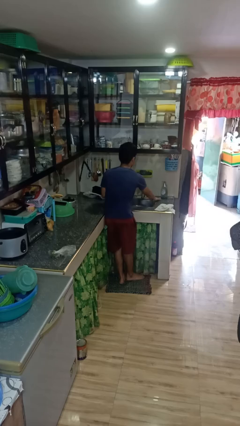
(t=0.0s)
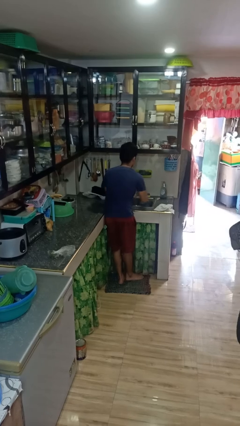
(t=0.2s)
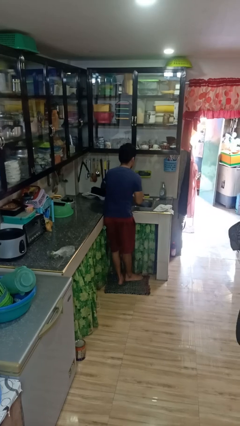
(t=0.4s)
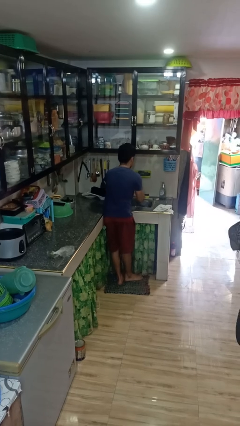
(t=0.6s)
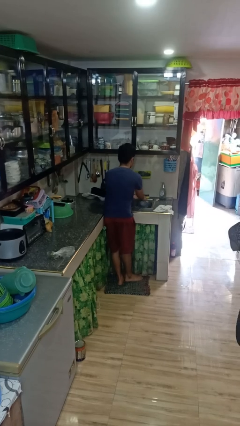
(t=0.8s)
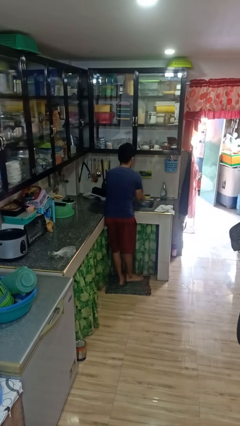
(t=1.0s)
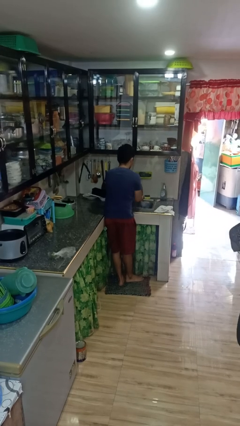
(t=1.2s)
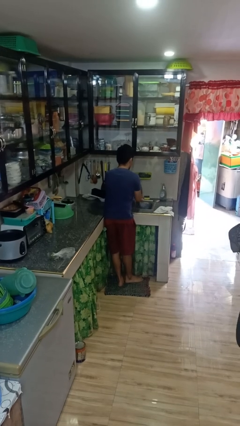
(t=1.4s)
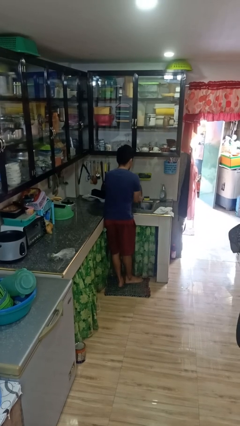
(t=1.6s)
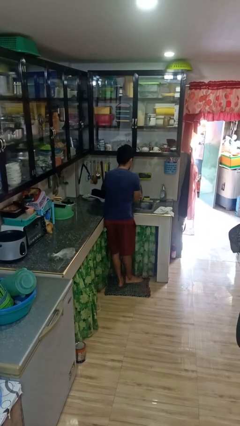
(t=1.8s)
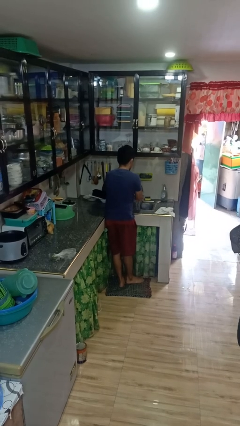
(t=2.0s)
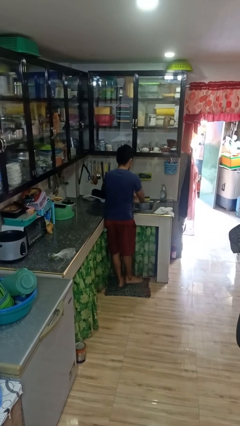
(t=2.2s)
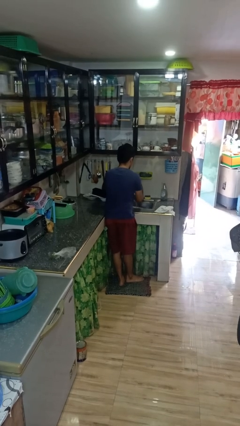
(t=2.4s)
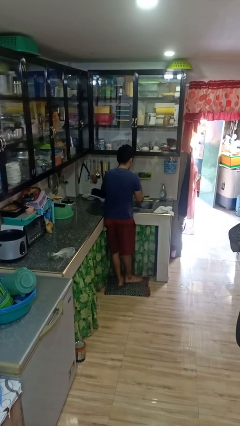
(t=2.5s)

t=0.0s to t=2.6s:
person washes hands

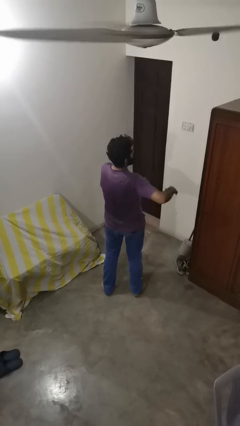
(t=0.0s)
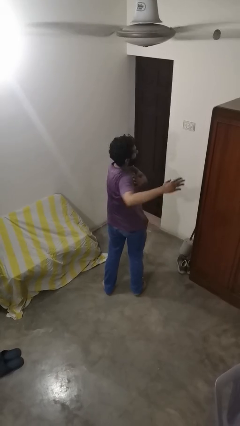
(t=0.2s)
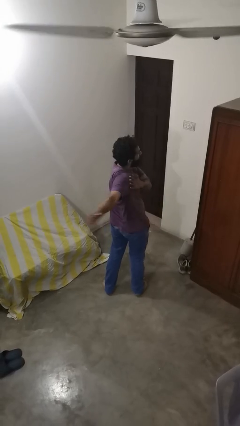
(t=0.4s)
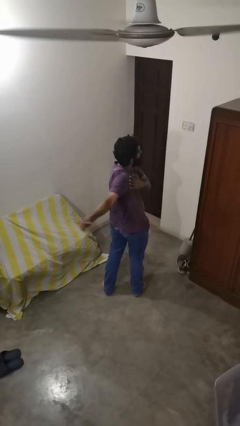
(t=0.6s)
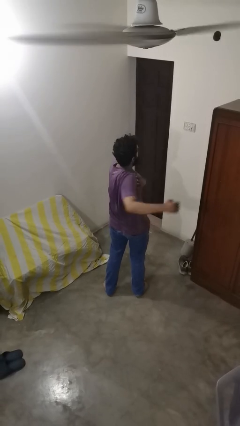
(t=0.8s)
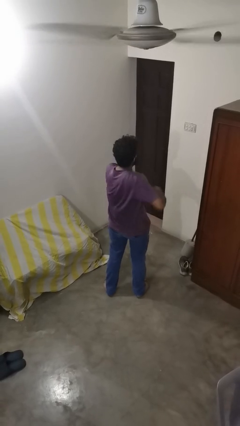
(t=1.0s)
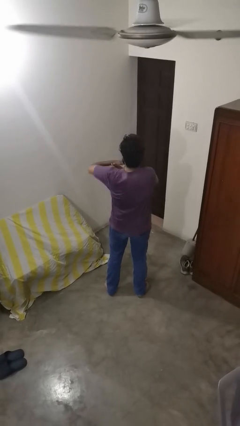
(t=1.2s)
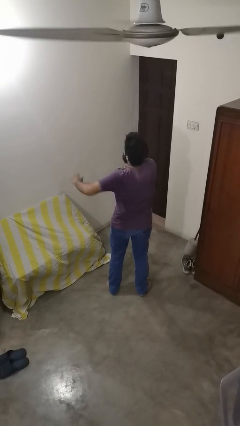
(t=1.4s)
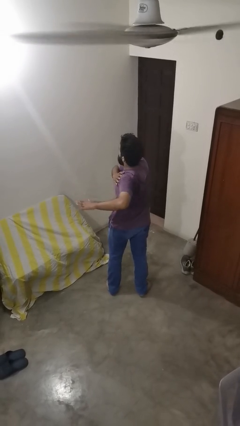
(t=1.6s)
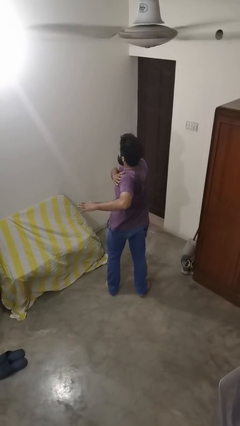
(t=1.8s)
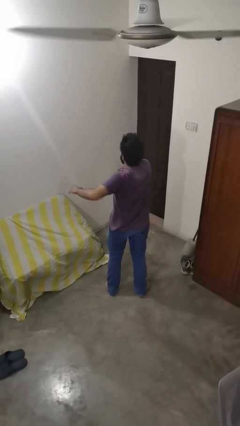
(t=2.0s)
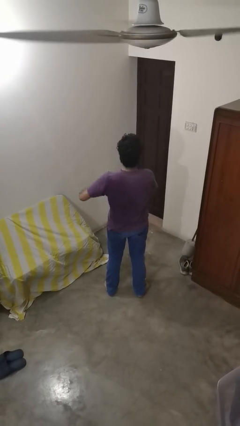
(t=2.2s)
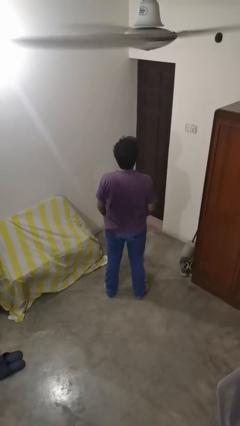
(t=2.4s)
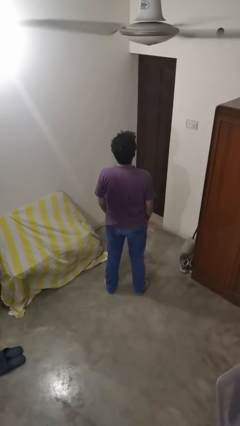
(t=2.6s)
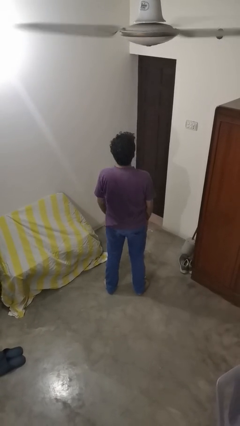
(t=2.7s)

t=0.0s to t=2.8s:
person stretches arms to side

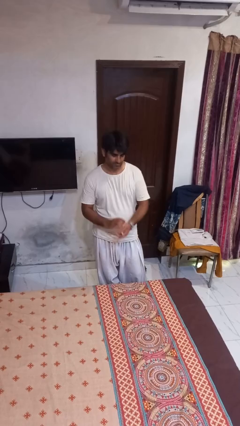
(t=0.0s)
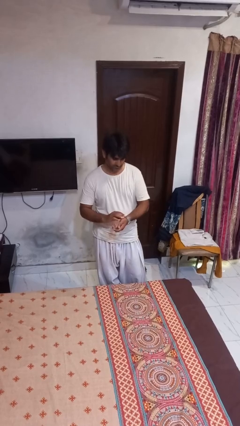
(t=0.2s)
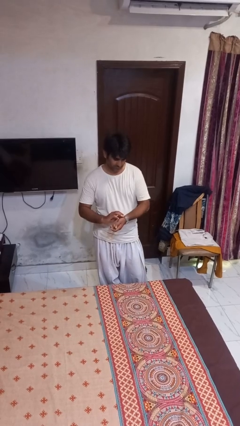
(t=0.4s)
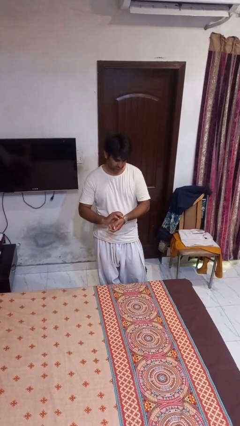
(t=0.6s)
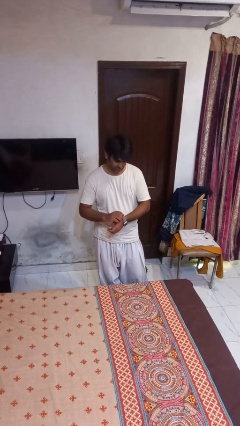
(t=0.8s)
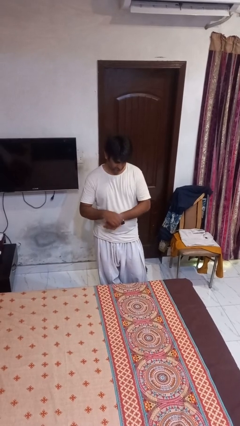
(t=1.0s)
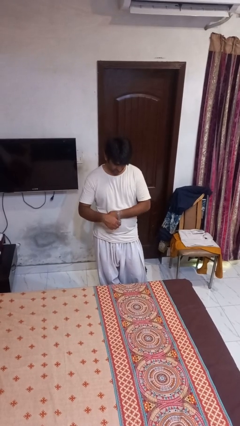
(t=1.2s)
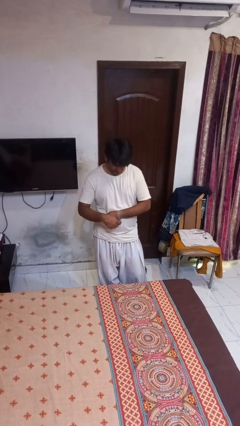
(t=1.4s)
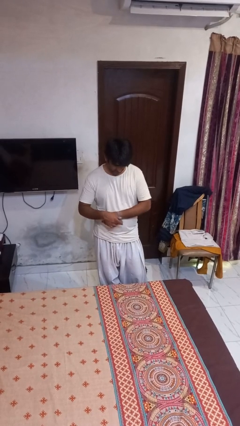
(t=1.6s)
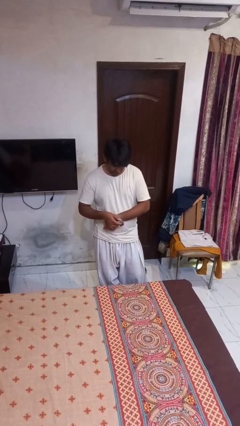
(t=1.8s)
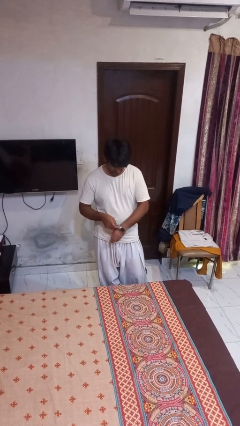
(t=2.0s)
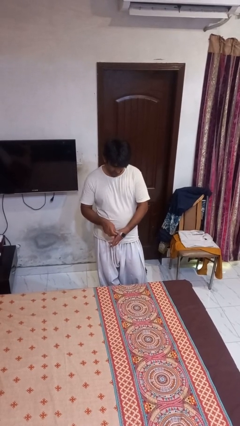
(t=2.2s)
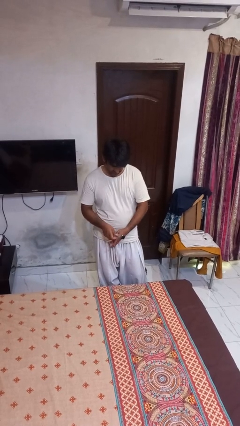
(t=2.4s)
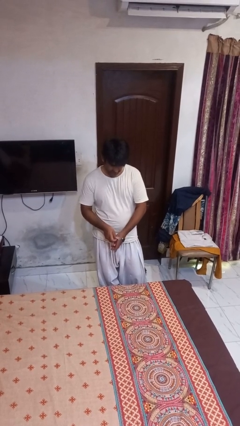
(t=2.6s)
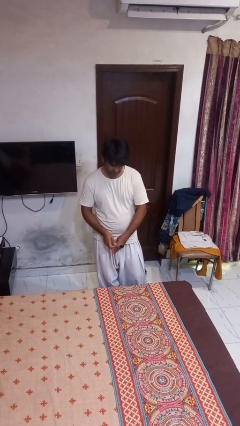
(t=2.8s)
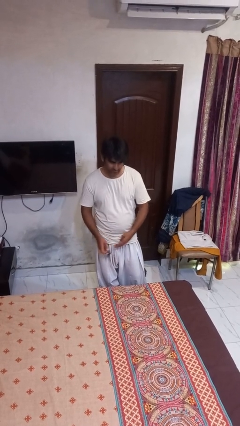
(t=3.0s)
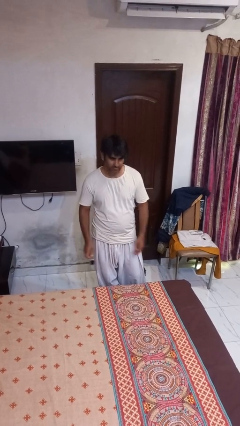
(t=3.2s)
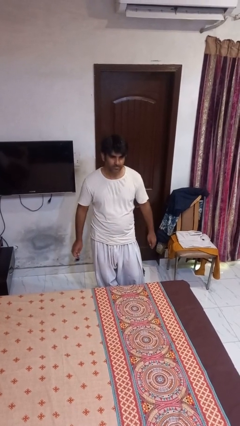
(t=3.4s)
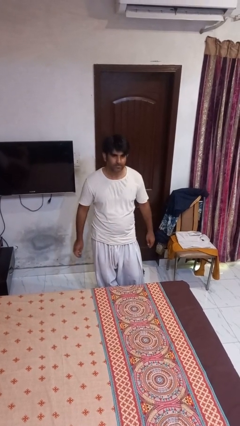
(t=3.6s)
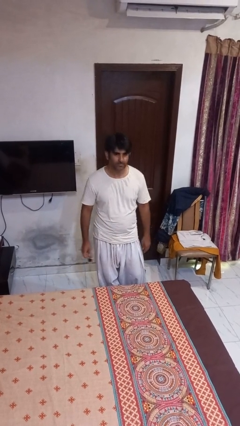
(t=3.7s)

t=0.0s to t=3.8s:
person takes off wristwatch

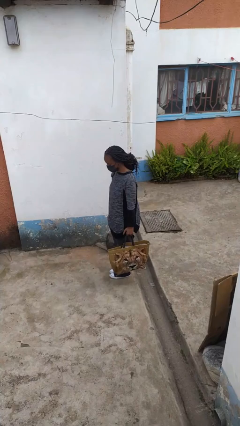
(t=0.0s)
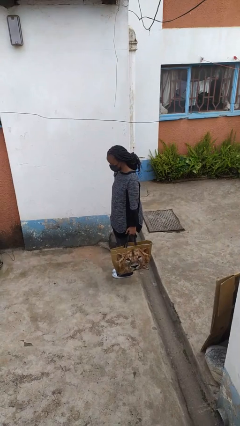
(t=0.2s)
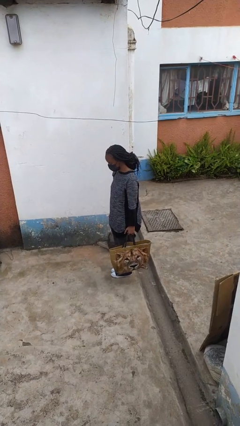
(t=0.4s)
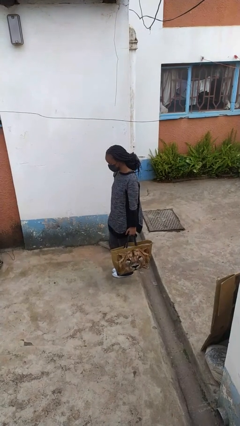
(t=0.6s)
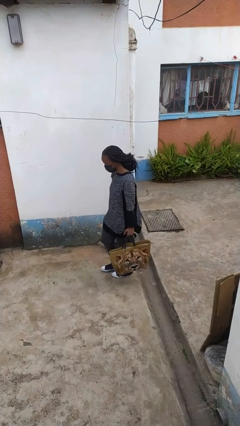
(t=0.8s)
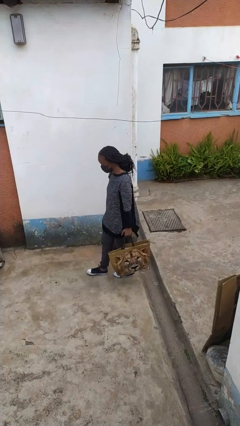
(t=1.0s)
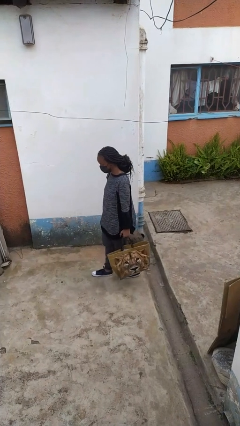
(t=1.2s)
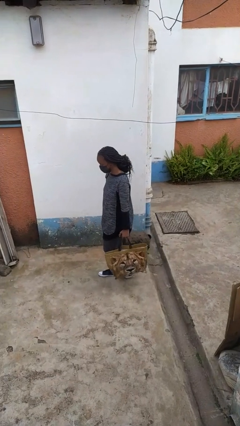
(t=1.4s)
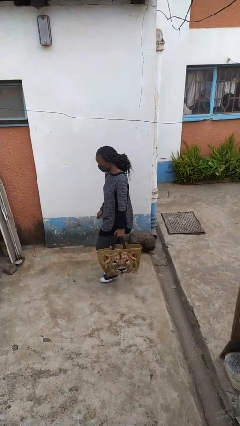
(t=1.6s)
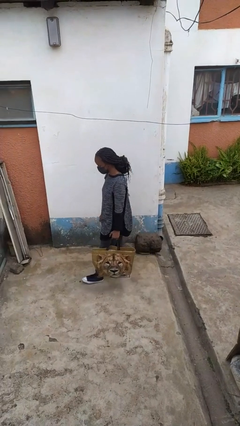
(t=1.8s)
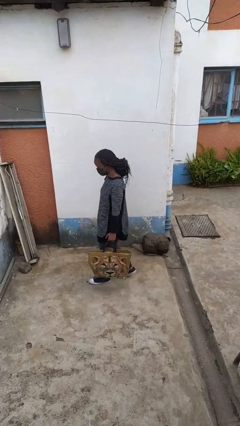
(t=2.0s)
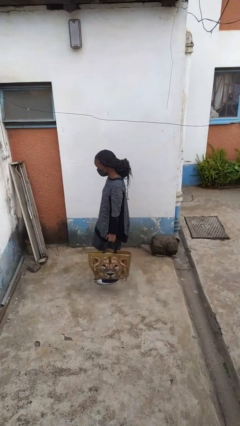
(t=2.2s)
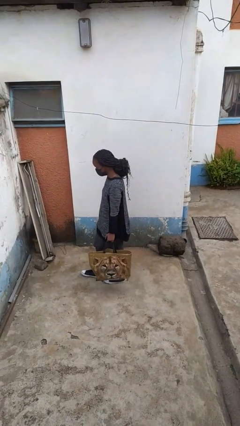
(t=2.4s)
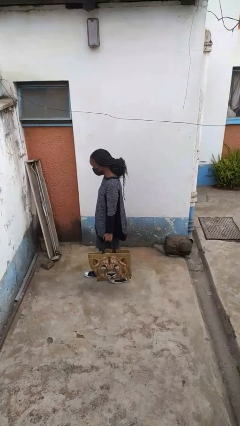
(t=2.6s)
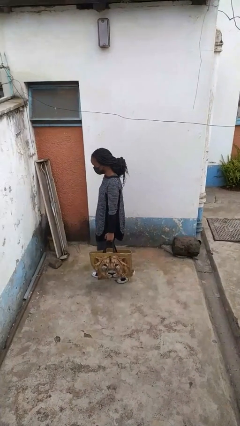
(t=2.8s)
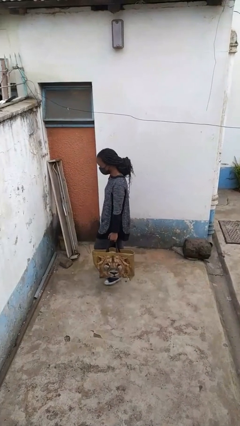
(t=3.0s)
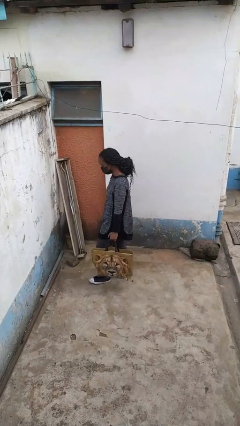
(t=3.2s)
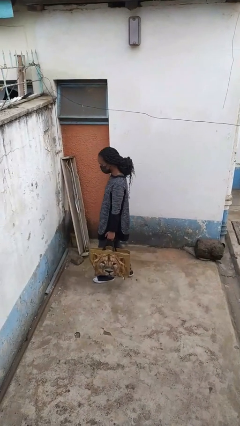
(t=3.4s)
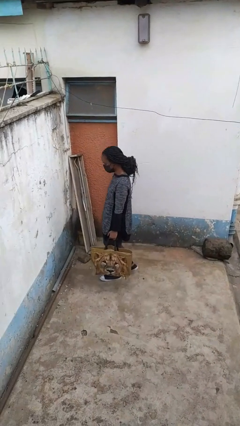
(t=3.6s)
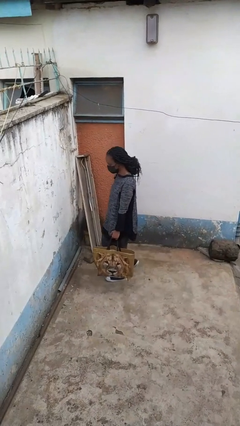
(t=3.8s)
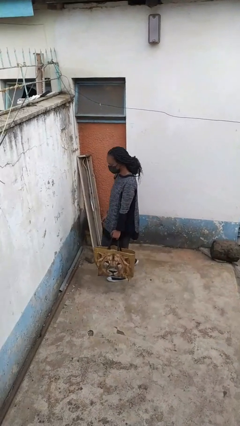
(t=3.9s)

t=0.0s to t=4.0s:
person carries groceries

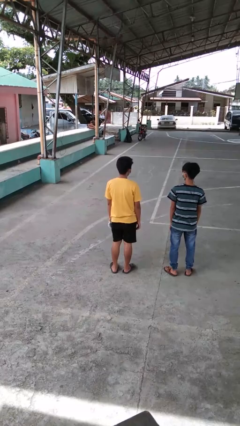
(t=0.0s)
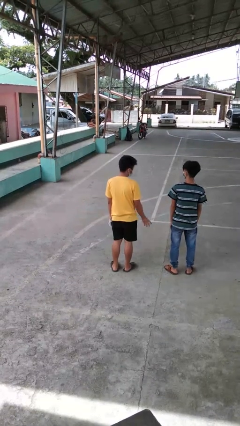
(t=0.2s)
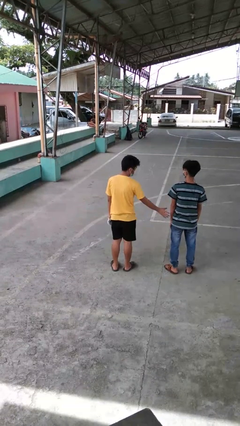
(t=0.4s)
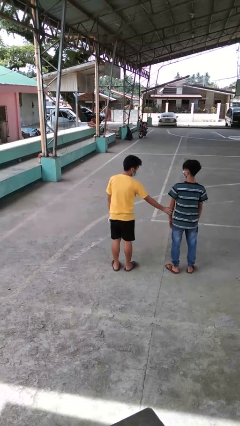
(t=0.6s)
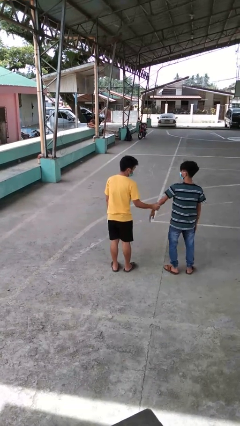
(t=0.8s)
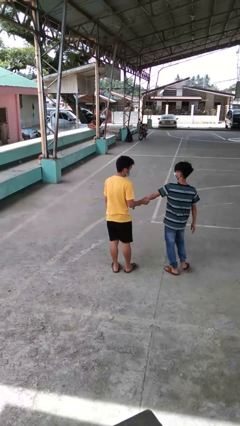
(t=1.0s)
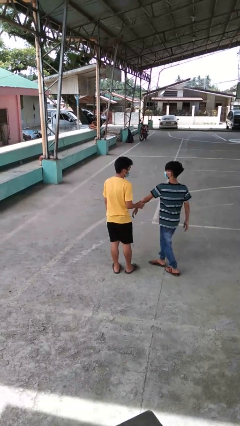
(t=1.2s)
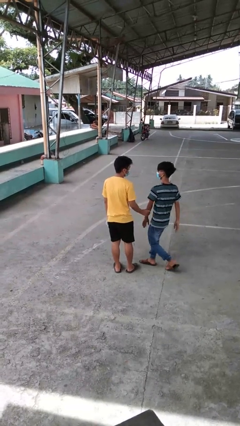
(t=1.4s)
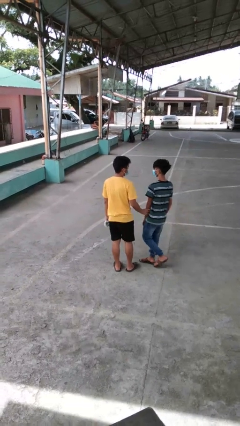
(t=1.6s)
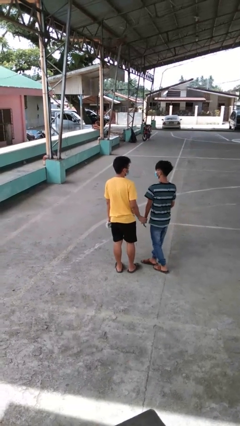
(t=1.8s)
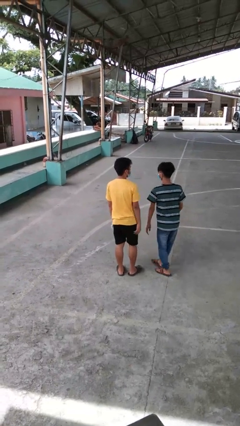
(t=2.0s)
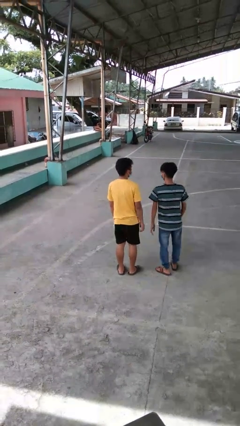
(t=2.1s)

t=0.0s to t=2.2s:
person grabs person by forearm

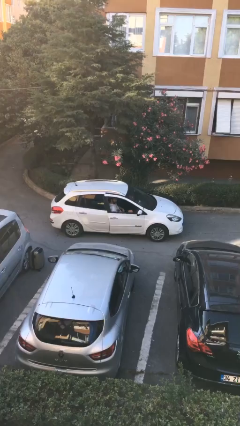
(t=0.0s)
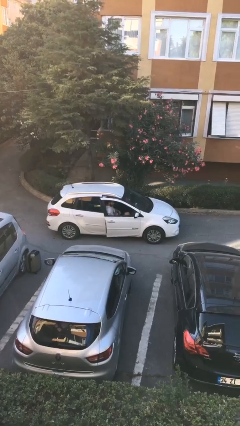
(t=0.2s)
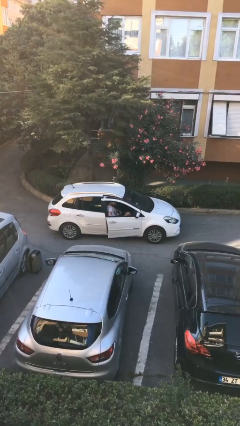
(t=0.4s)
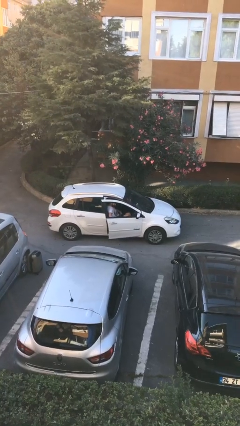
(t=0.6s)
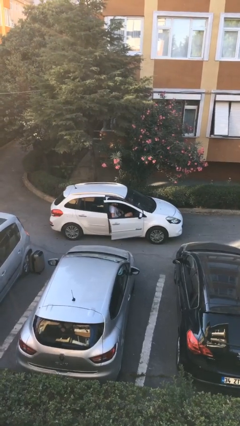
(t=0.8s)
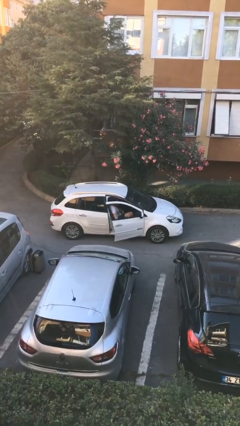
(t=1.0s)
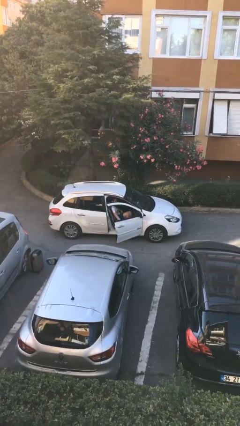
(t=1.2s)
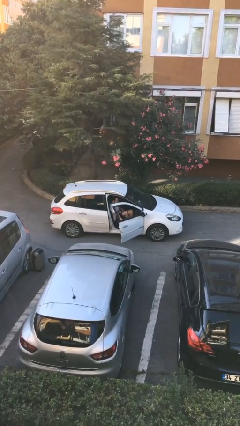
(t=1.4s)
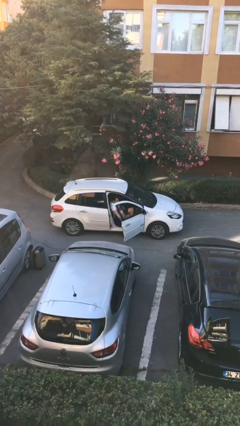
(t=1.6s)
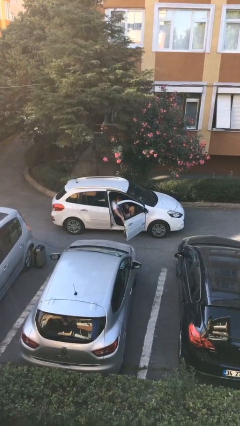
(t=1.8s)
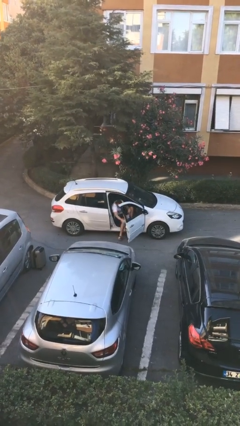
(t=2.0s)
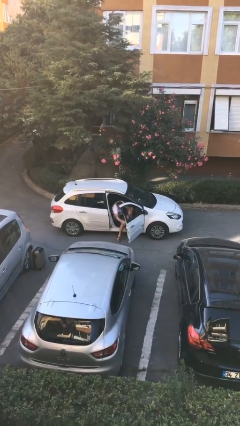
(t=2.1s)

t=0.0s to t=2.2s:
person opens car door
